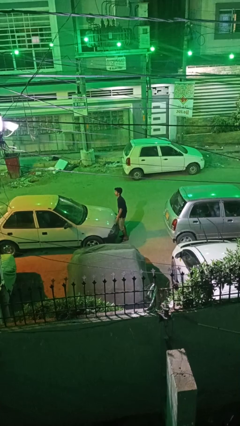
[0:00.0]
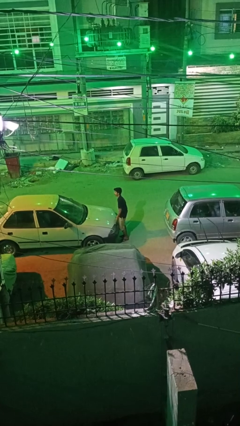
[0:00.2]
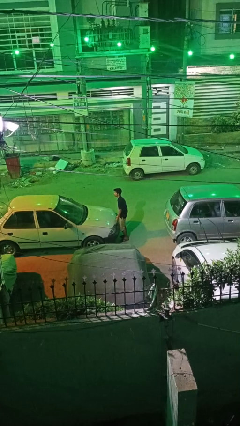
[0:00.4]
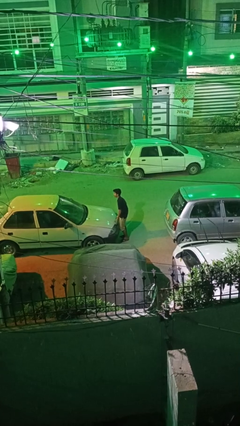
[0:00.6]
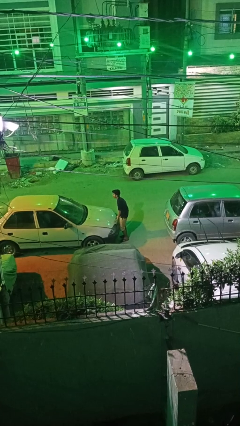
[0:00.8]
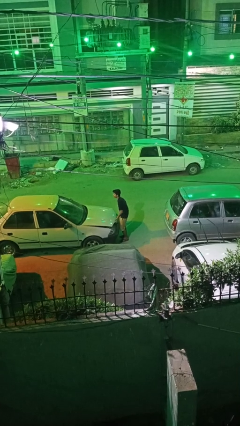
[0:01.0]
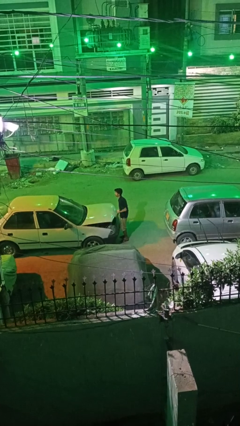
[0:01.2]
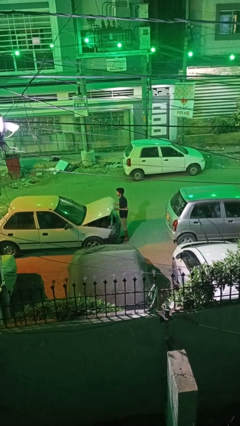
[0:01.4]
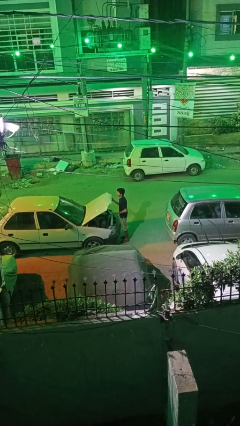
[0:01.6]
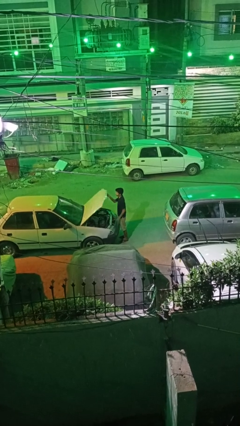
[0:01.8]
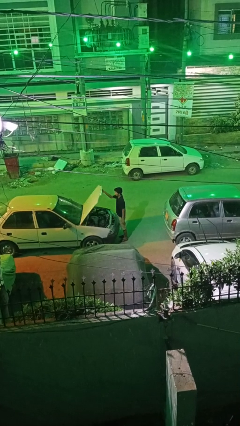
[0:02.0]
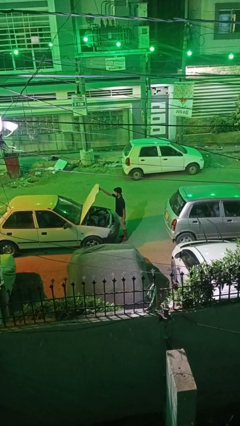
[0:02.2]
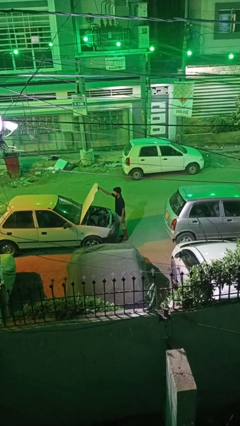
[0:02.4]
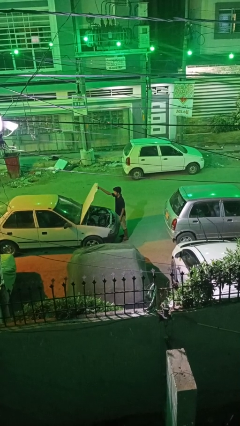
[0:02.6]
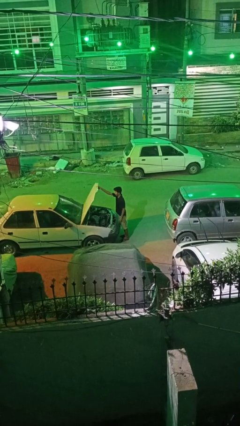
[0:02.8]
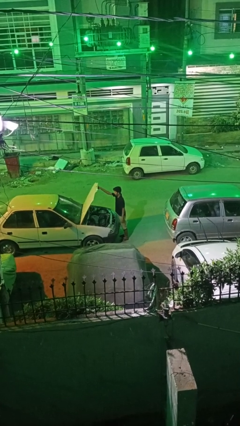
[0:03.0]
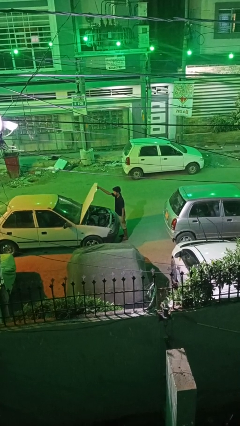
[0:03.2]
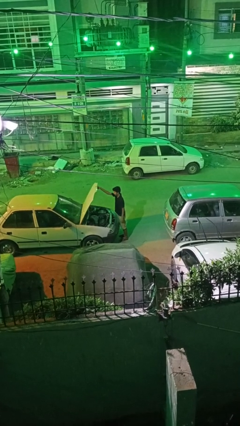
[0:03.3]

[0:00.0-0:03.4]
person opens car hood

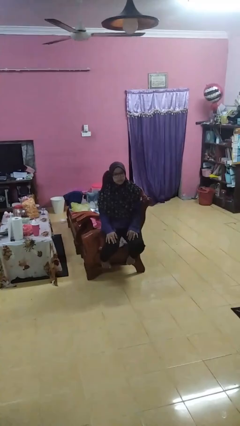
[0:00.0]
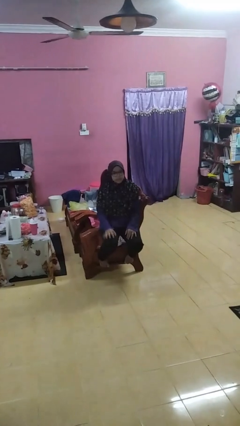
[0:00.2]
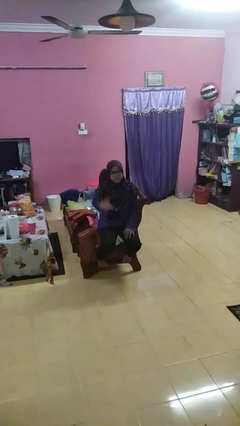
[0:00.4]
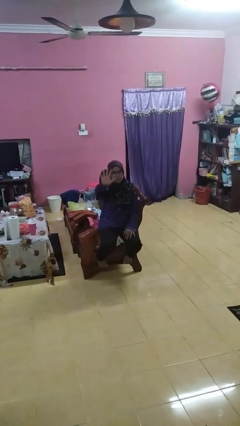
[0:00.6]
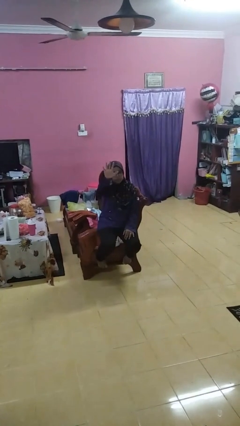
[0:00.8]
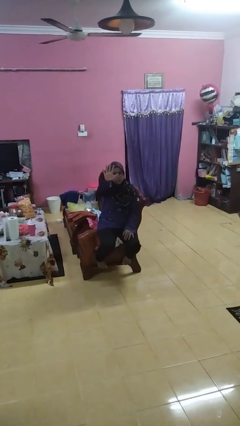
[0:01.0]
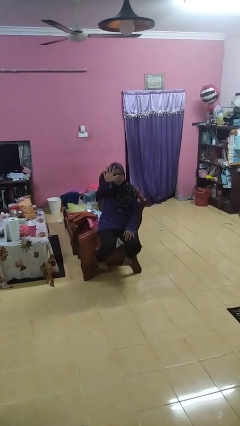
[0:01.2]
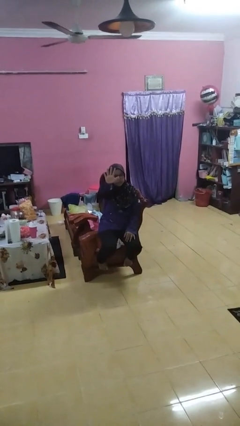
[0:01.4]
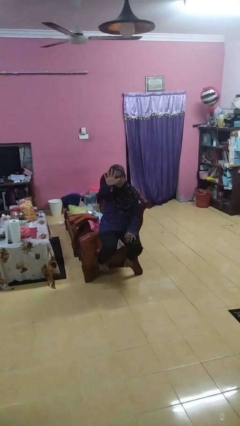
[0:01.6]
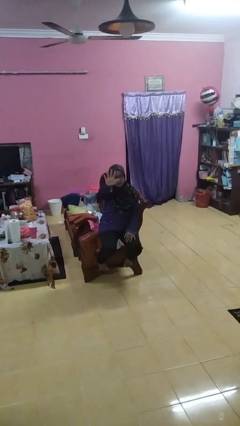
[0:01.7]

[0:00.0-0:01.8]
person gestures number five

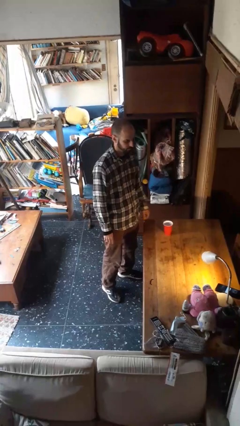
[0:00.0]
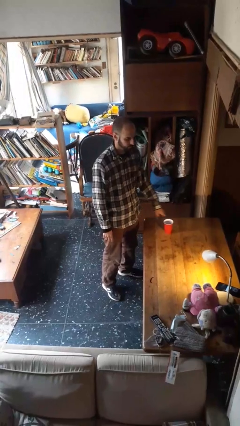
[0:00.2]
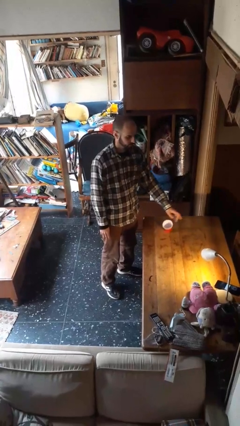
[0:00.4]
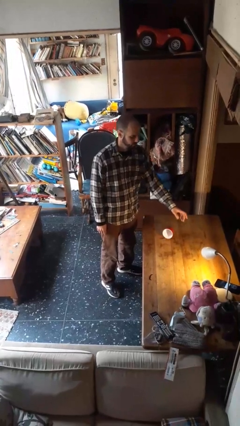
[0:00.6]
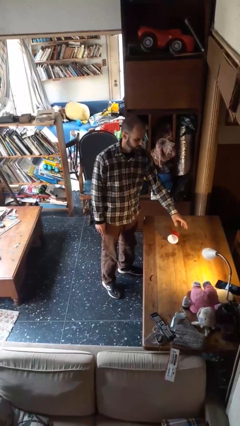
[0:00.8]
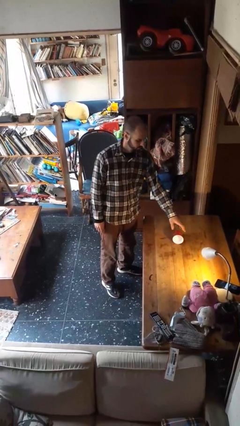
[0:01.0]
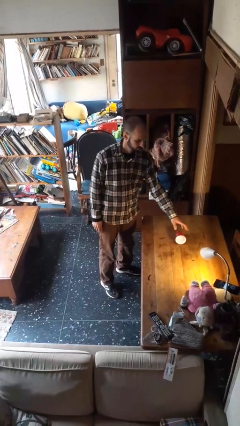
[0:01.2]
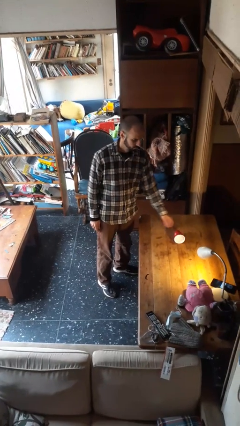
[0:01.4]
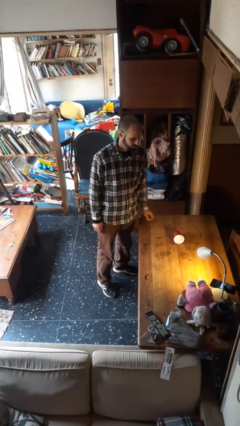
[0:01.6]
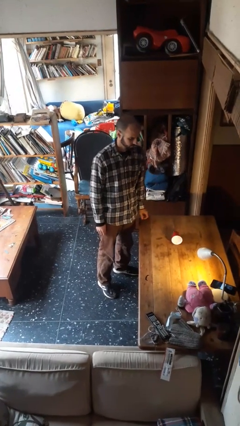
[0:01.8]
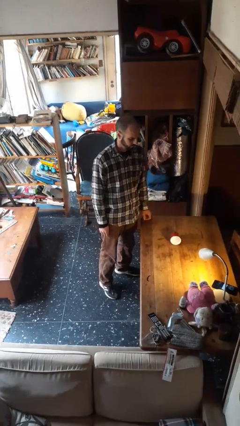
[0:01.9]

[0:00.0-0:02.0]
person knocks over glass

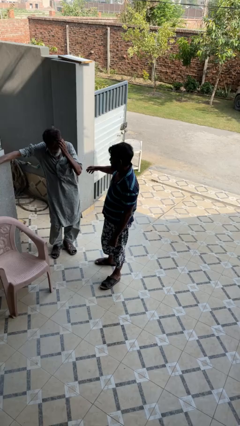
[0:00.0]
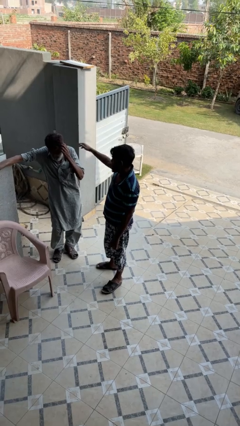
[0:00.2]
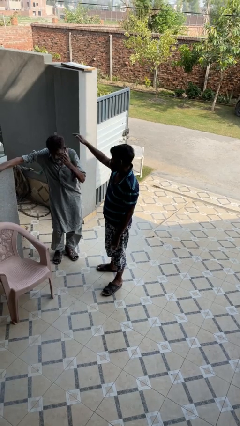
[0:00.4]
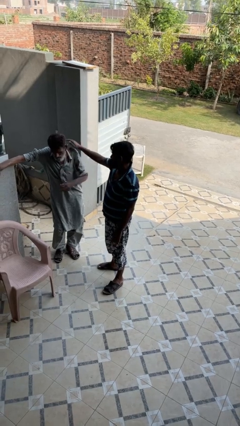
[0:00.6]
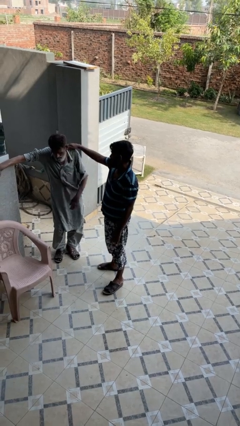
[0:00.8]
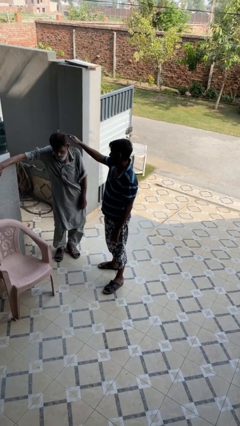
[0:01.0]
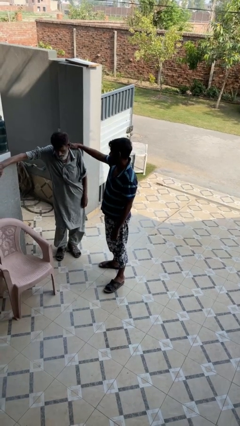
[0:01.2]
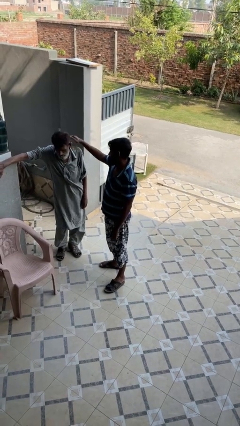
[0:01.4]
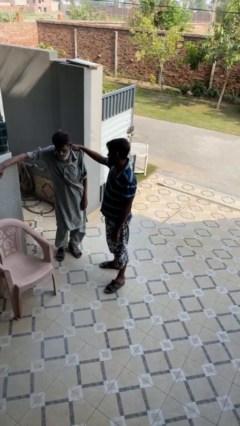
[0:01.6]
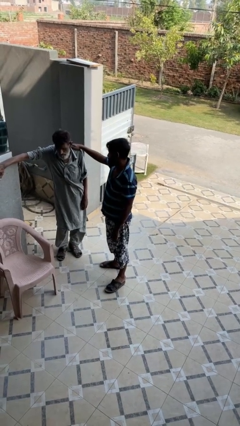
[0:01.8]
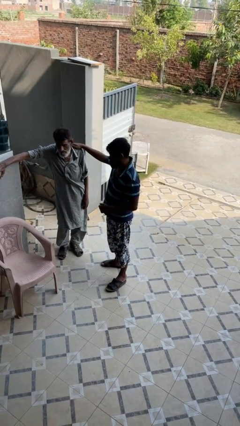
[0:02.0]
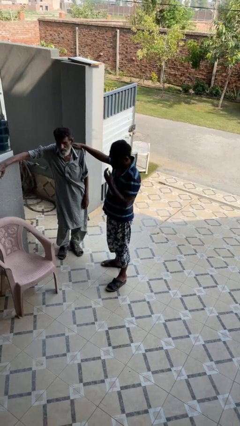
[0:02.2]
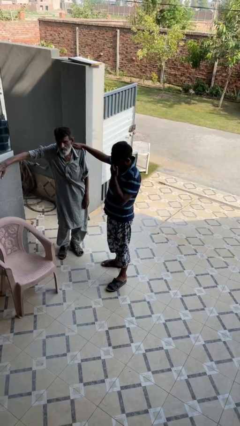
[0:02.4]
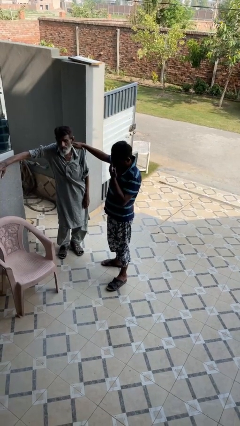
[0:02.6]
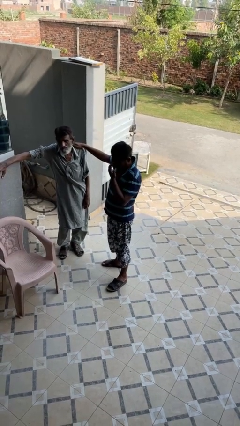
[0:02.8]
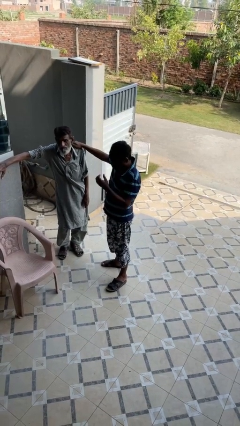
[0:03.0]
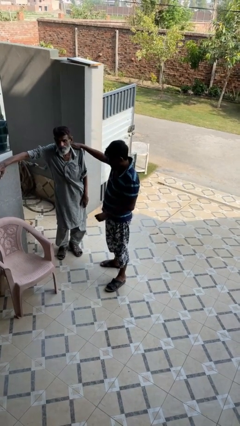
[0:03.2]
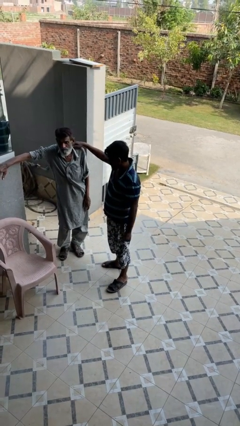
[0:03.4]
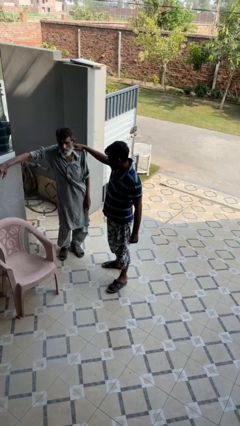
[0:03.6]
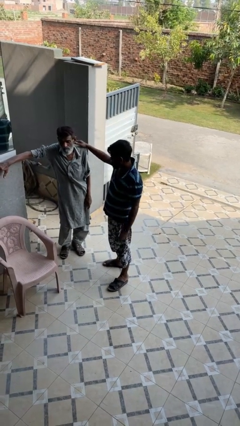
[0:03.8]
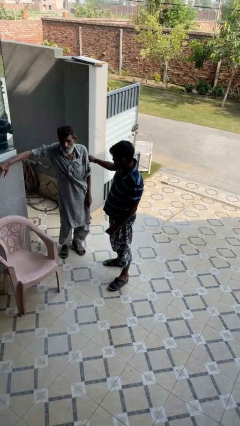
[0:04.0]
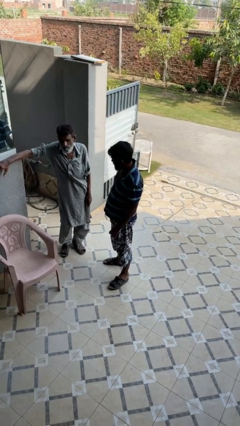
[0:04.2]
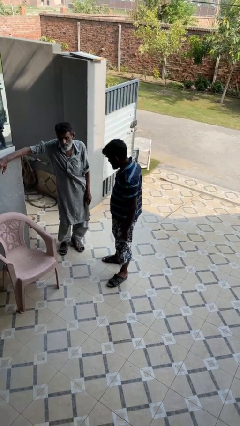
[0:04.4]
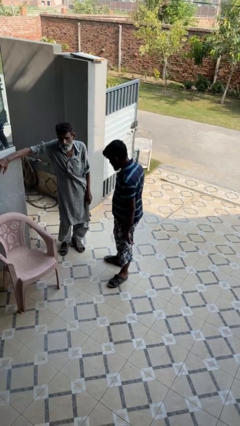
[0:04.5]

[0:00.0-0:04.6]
person pounds shoulders of person

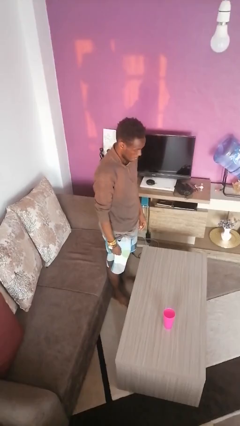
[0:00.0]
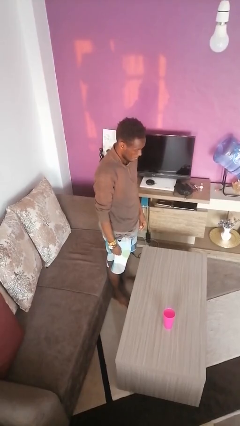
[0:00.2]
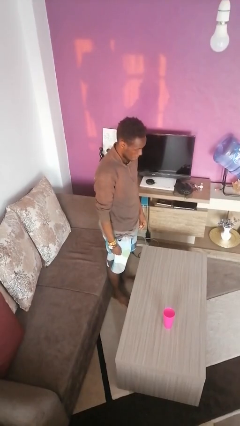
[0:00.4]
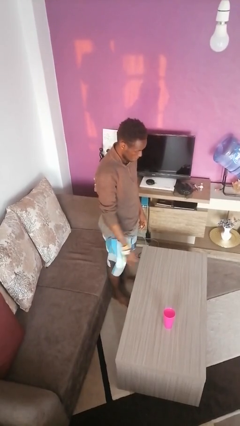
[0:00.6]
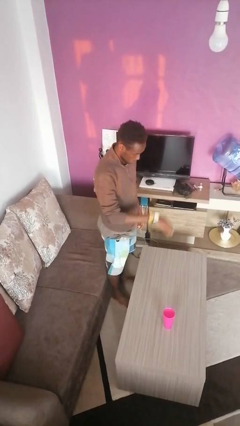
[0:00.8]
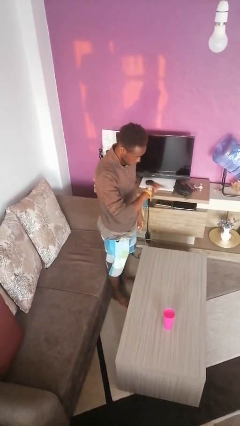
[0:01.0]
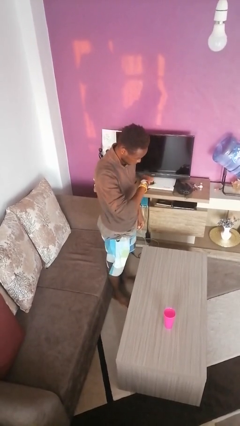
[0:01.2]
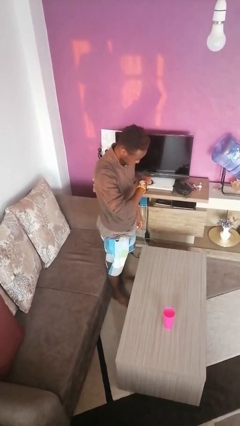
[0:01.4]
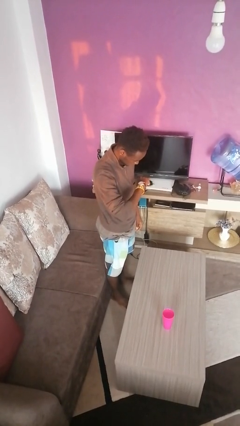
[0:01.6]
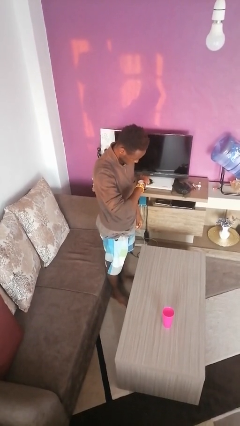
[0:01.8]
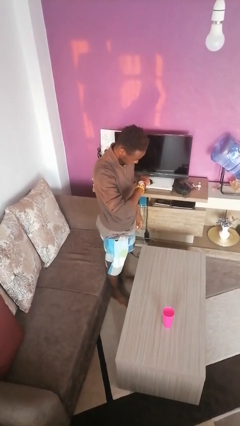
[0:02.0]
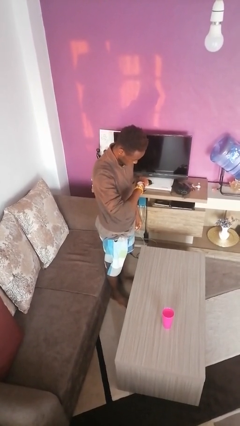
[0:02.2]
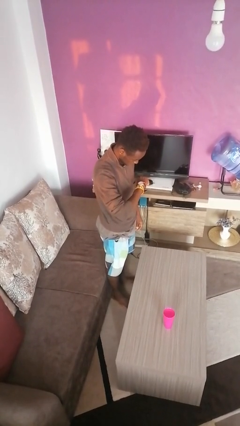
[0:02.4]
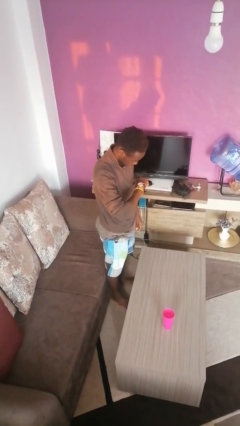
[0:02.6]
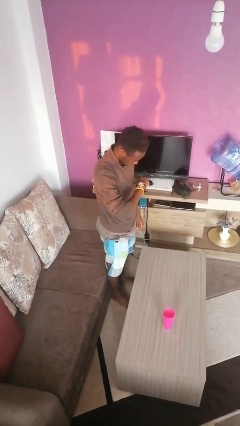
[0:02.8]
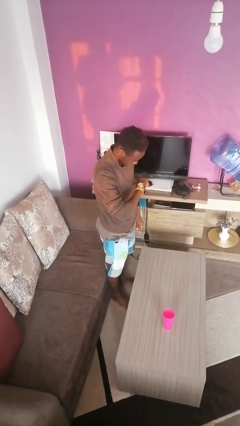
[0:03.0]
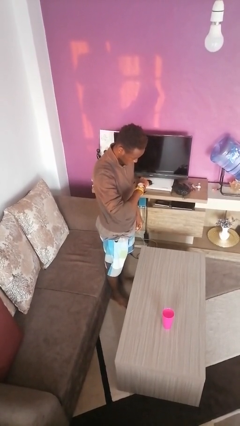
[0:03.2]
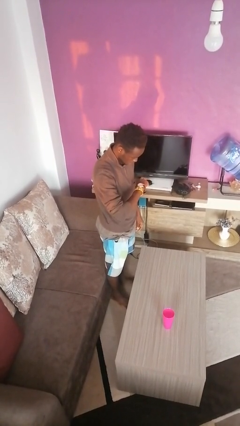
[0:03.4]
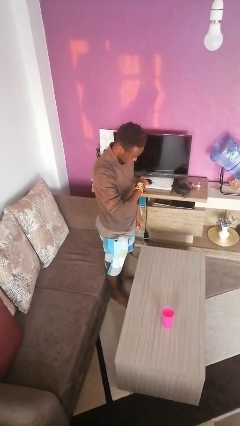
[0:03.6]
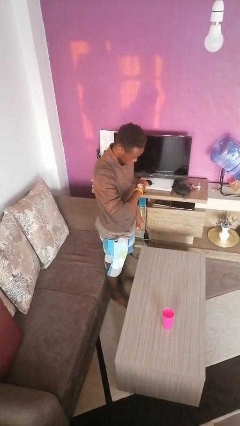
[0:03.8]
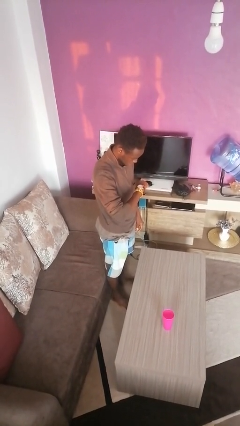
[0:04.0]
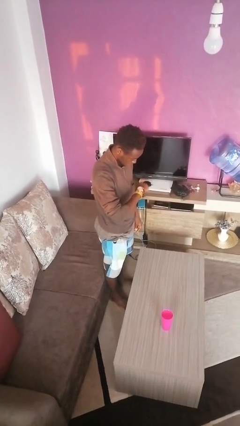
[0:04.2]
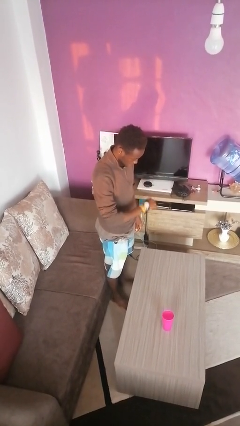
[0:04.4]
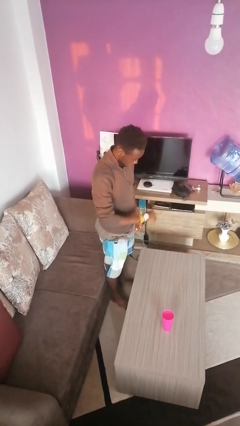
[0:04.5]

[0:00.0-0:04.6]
person looks at wristwatch

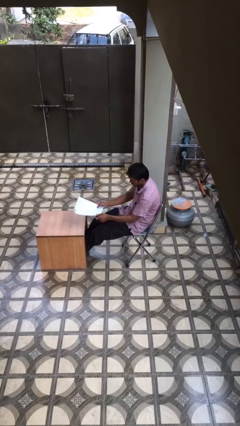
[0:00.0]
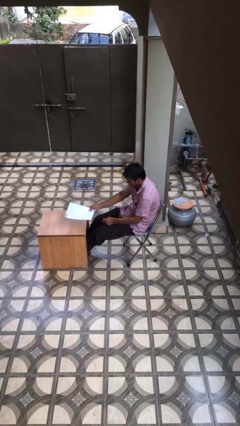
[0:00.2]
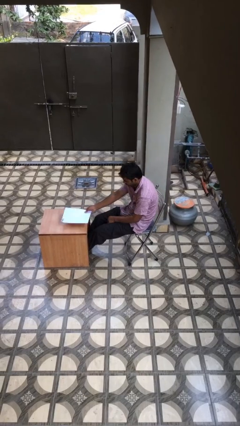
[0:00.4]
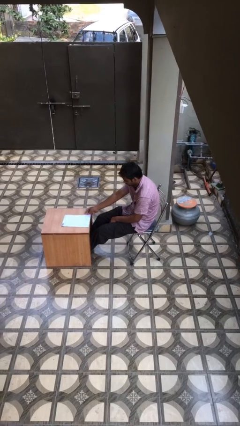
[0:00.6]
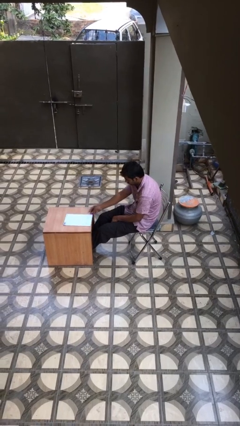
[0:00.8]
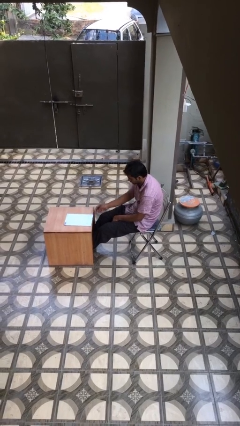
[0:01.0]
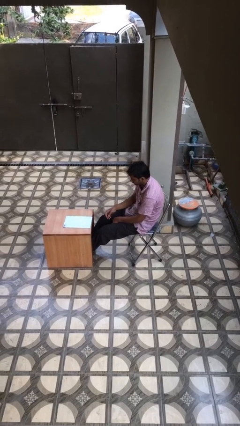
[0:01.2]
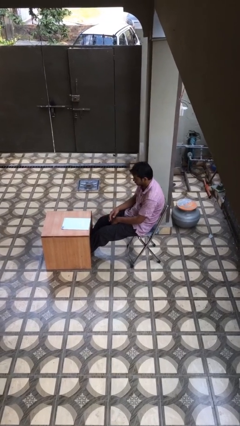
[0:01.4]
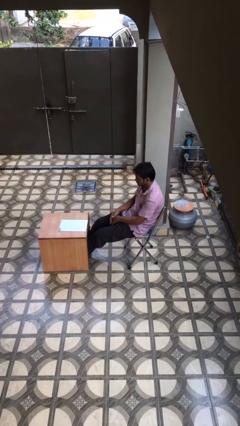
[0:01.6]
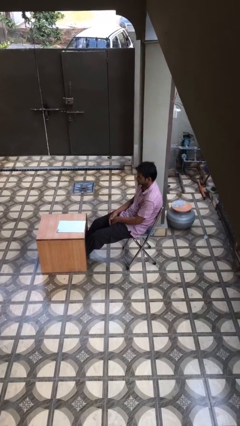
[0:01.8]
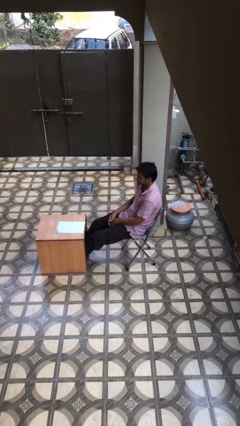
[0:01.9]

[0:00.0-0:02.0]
person puts down object on table
